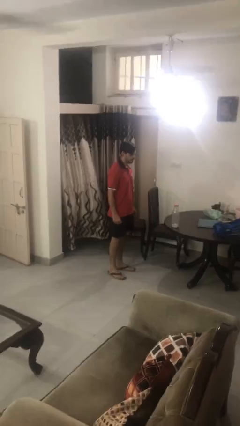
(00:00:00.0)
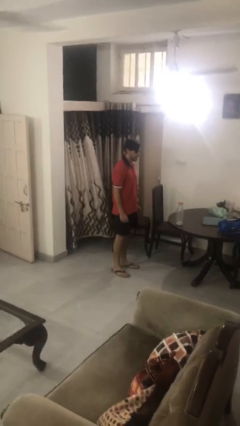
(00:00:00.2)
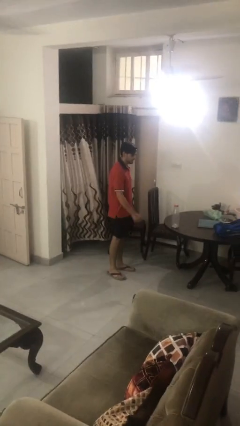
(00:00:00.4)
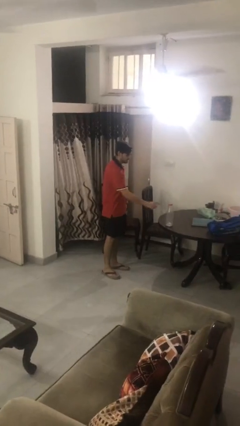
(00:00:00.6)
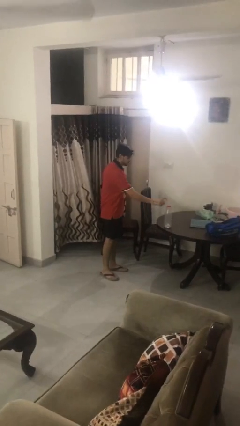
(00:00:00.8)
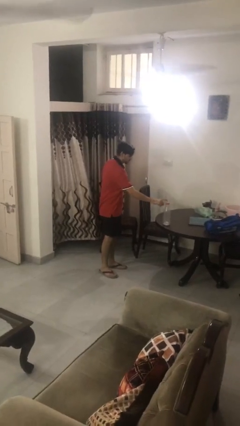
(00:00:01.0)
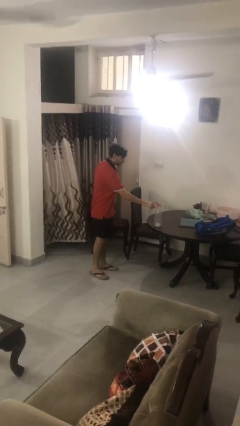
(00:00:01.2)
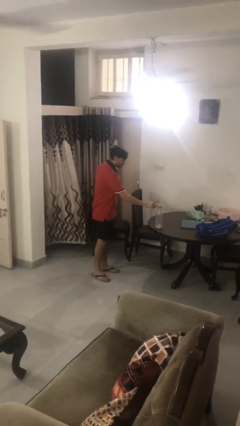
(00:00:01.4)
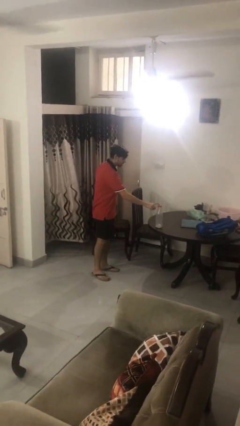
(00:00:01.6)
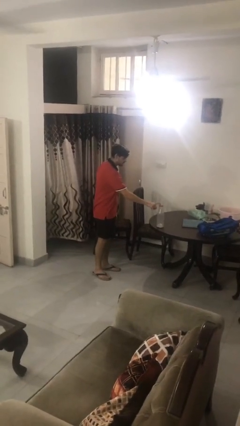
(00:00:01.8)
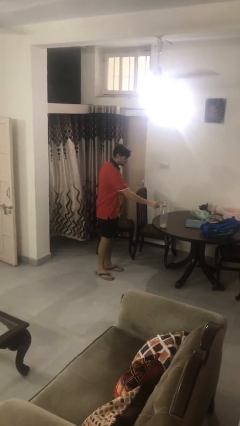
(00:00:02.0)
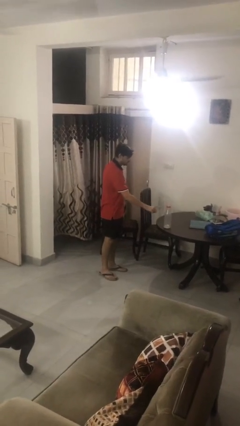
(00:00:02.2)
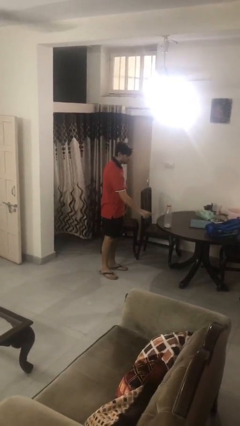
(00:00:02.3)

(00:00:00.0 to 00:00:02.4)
person taps object with finger

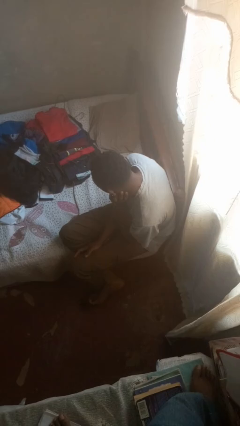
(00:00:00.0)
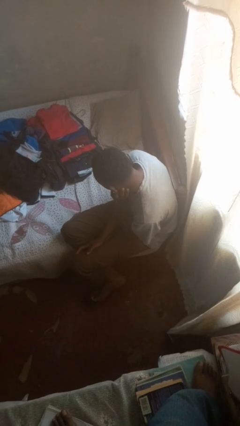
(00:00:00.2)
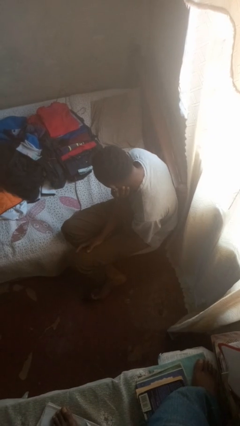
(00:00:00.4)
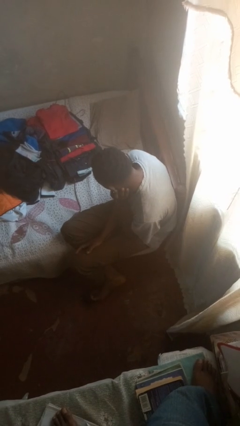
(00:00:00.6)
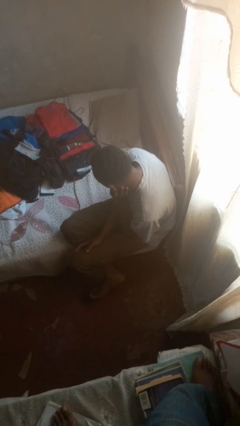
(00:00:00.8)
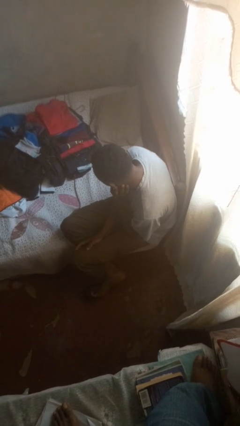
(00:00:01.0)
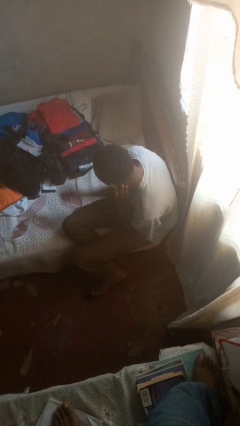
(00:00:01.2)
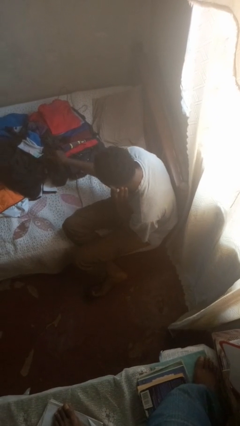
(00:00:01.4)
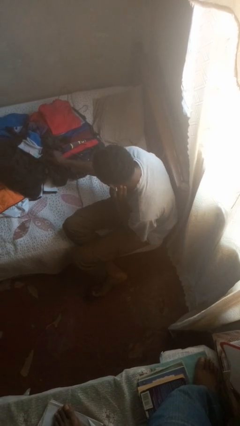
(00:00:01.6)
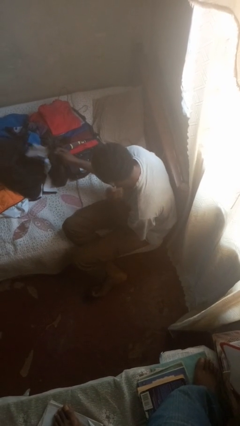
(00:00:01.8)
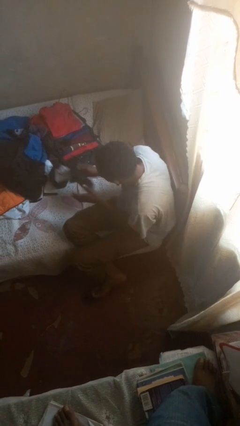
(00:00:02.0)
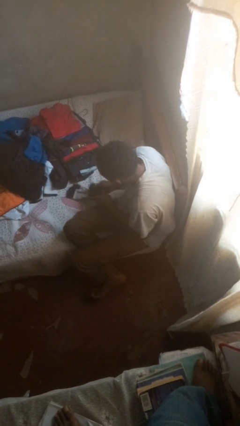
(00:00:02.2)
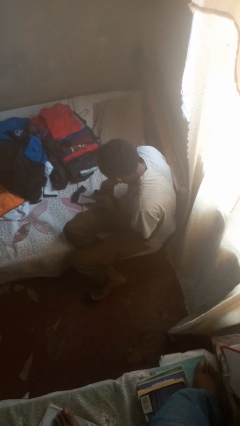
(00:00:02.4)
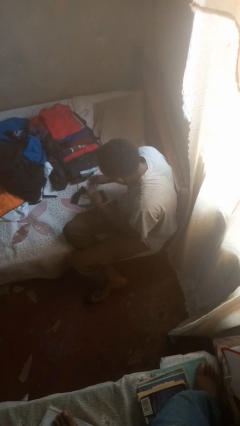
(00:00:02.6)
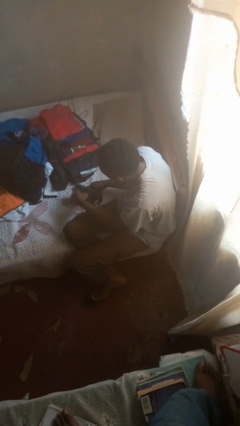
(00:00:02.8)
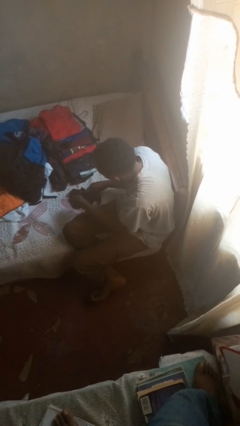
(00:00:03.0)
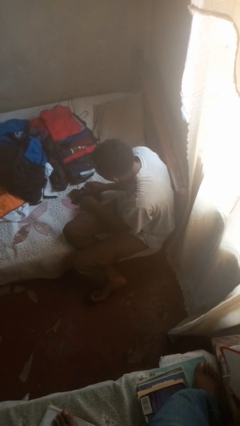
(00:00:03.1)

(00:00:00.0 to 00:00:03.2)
person folds socks

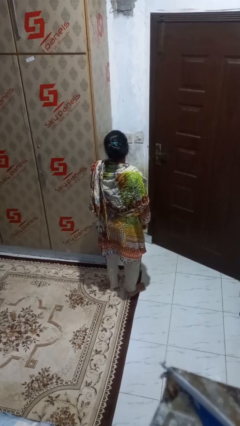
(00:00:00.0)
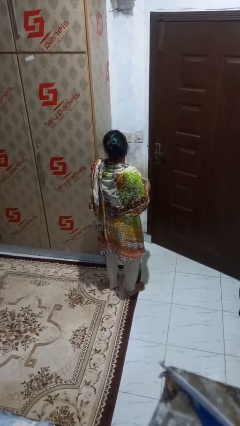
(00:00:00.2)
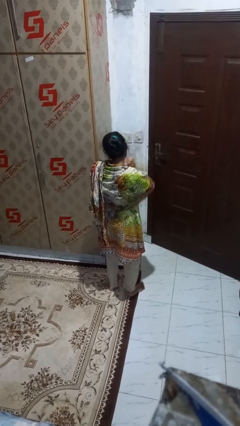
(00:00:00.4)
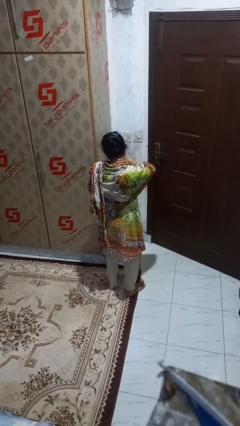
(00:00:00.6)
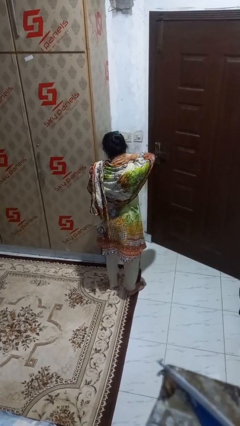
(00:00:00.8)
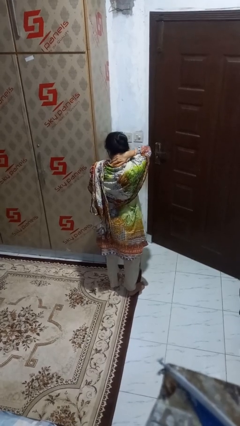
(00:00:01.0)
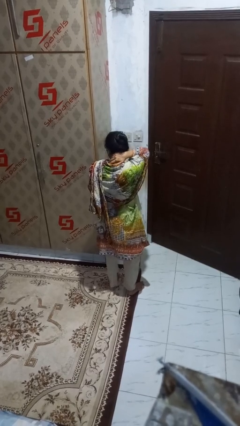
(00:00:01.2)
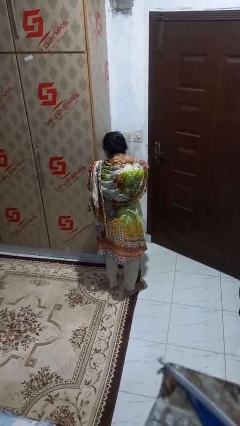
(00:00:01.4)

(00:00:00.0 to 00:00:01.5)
person rubs neck

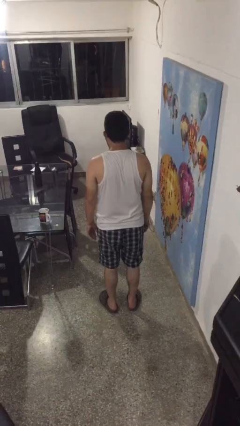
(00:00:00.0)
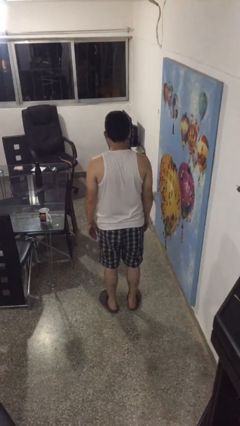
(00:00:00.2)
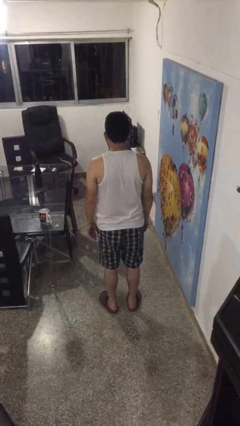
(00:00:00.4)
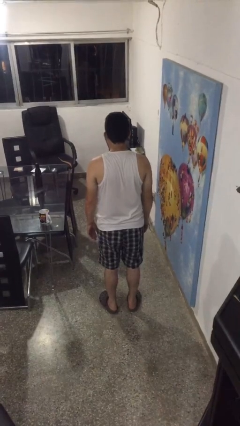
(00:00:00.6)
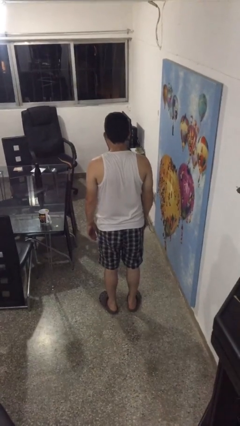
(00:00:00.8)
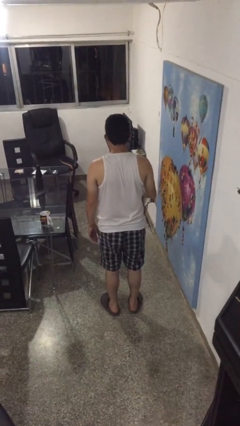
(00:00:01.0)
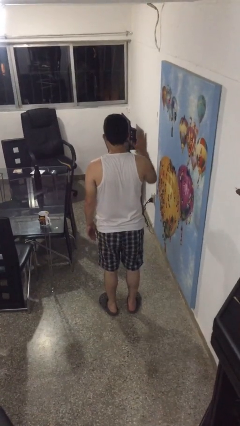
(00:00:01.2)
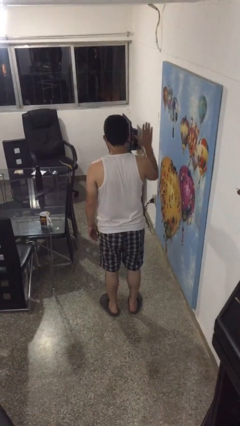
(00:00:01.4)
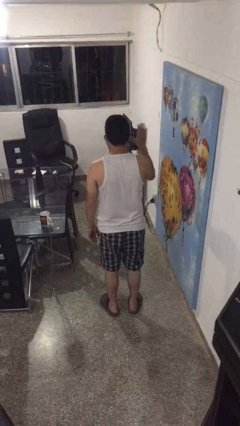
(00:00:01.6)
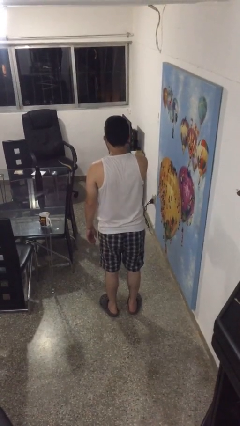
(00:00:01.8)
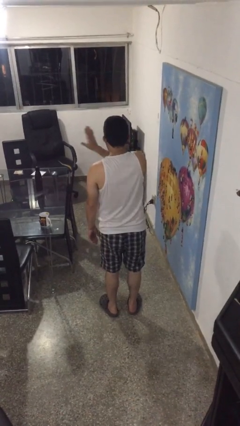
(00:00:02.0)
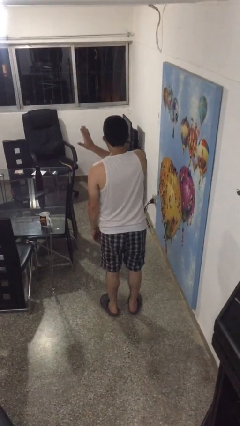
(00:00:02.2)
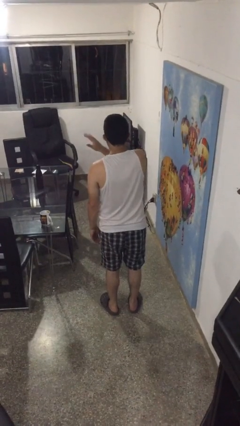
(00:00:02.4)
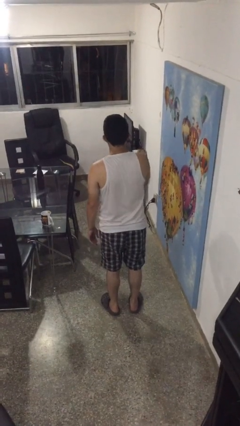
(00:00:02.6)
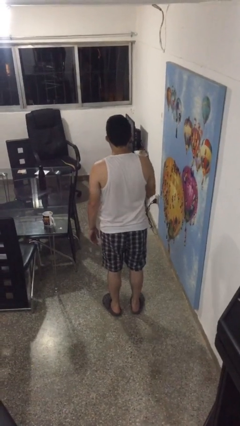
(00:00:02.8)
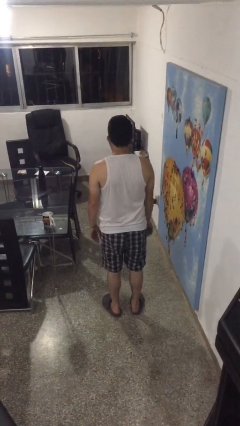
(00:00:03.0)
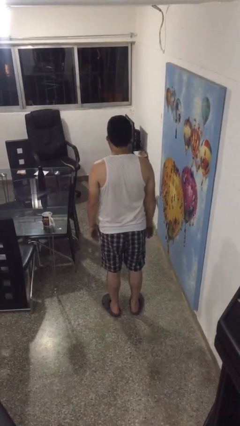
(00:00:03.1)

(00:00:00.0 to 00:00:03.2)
person gestures swipe left

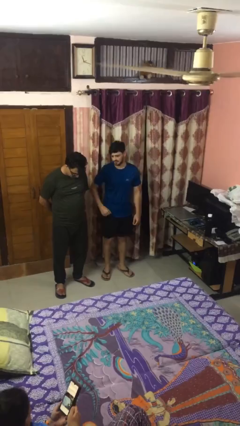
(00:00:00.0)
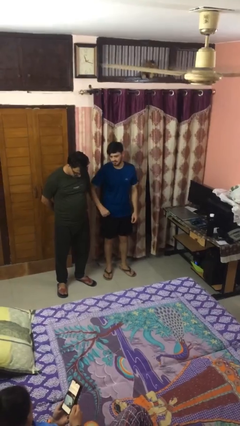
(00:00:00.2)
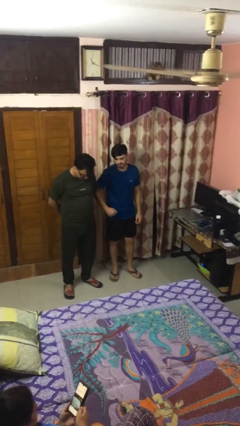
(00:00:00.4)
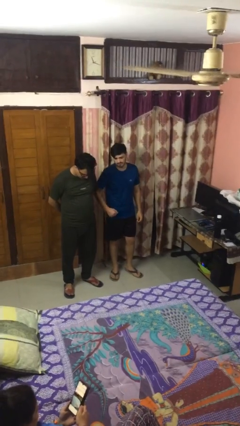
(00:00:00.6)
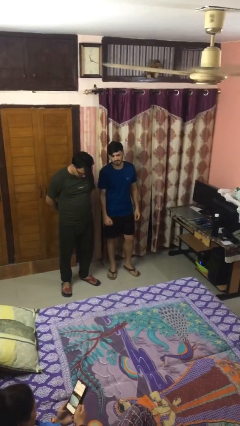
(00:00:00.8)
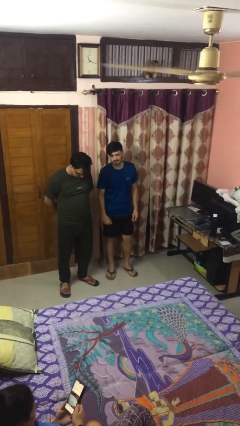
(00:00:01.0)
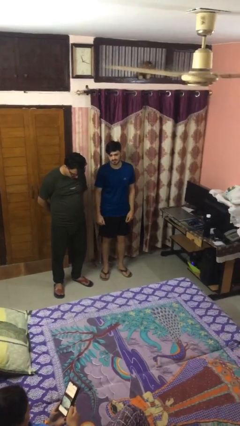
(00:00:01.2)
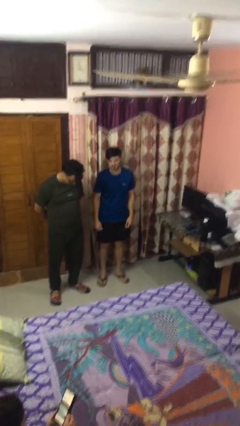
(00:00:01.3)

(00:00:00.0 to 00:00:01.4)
person nudges person with elbow

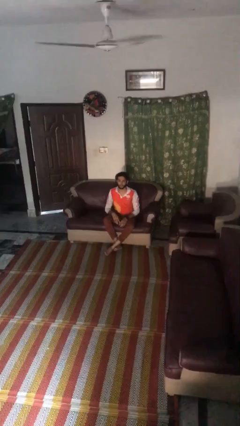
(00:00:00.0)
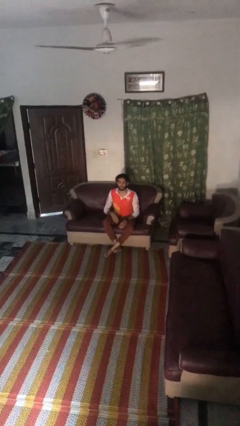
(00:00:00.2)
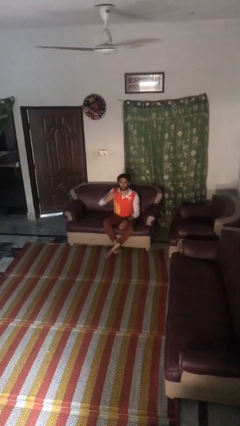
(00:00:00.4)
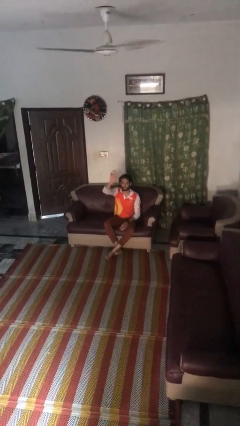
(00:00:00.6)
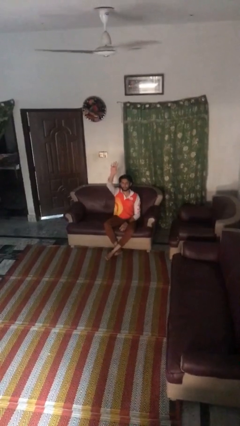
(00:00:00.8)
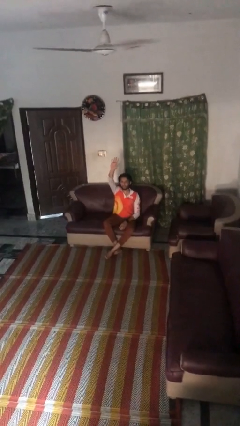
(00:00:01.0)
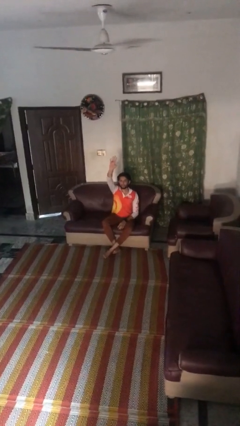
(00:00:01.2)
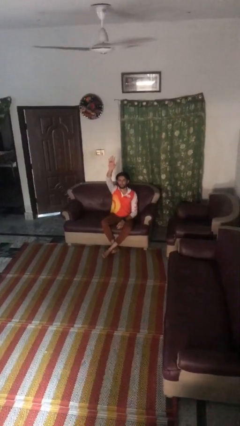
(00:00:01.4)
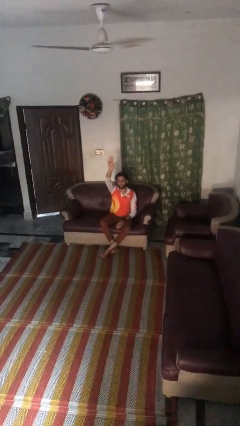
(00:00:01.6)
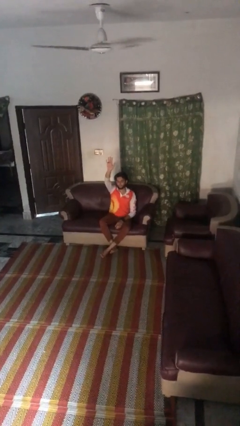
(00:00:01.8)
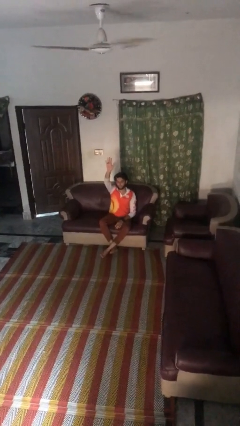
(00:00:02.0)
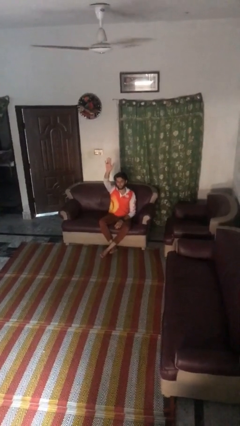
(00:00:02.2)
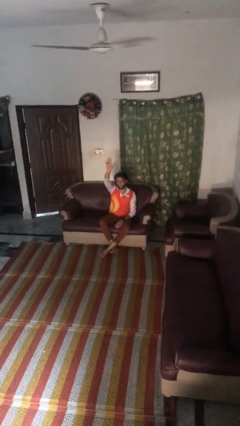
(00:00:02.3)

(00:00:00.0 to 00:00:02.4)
person gestures raise hand

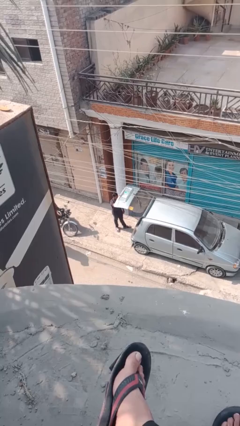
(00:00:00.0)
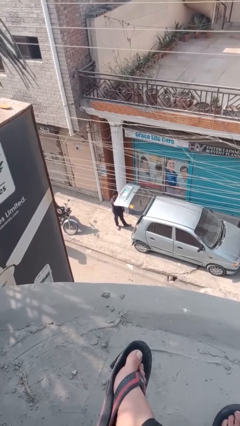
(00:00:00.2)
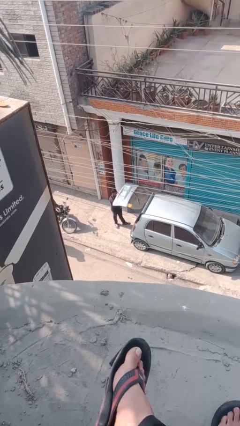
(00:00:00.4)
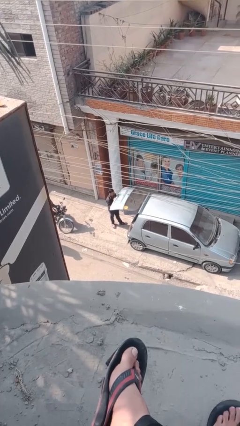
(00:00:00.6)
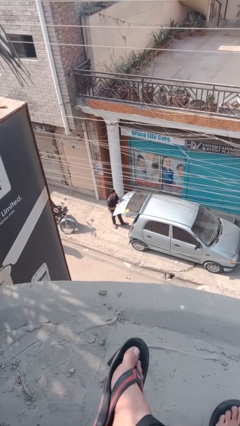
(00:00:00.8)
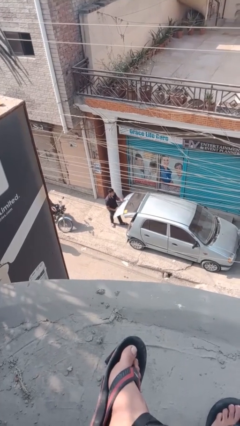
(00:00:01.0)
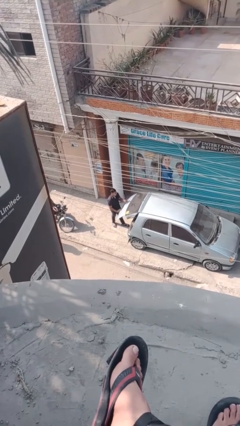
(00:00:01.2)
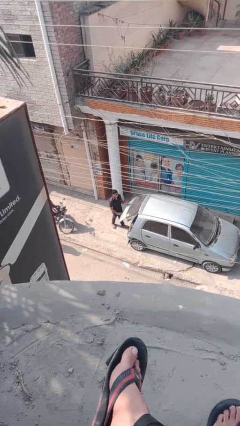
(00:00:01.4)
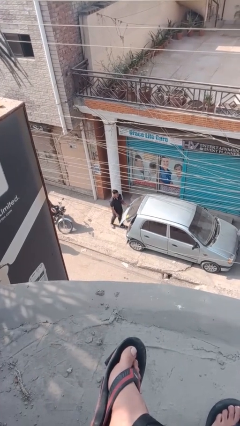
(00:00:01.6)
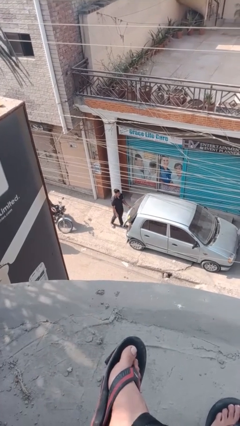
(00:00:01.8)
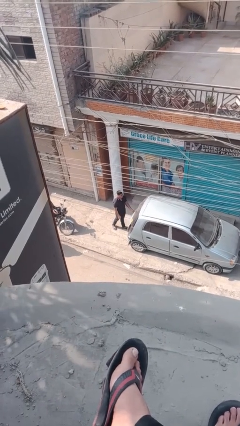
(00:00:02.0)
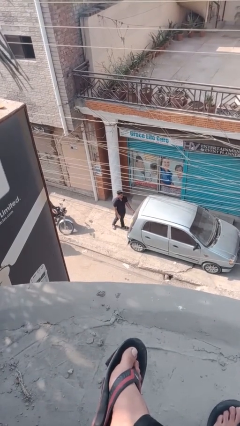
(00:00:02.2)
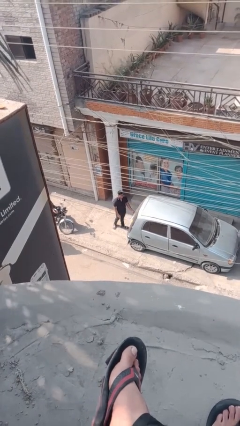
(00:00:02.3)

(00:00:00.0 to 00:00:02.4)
person closes car trunk

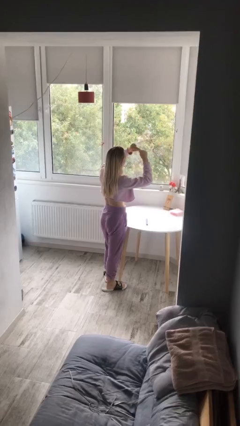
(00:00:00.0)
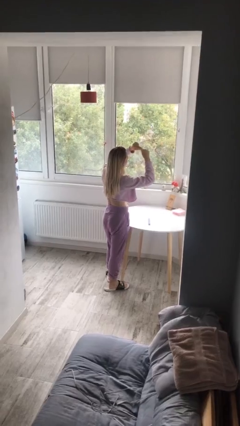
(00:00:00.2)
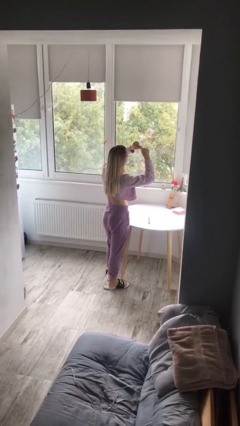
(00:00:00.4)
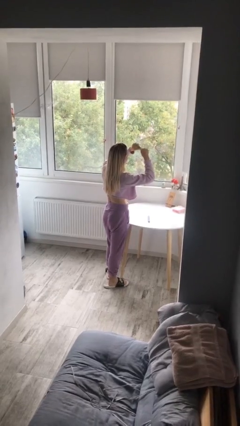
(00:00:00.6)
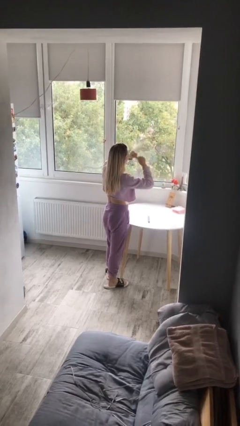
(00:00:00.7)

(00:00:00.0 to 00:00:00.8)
person clips fingernails
